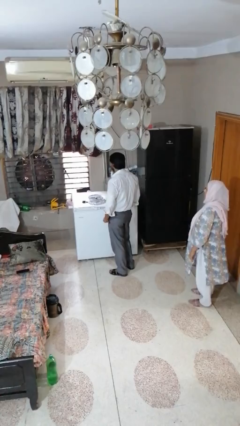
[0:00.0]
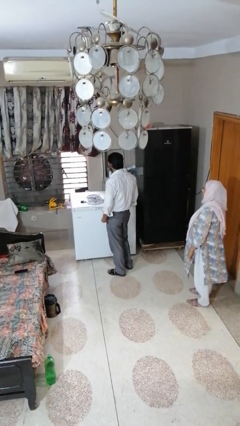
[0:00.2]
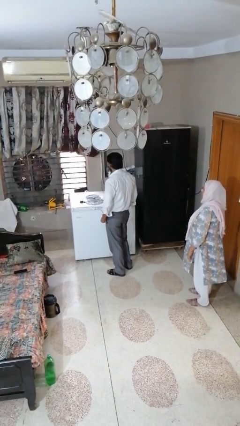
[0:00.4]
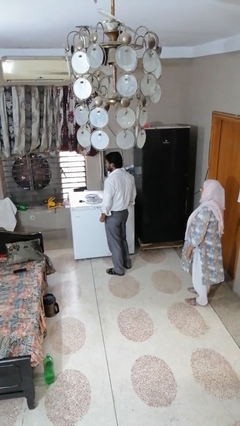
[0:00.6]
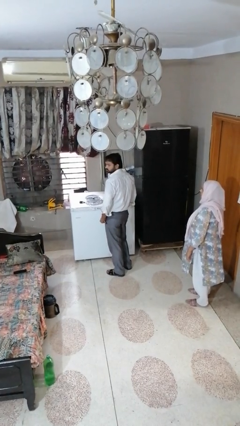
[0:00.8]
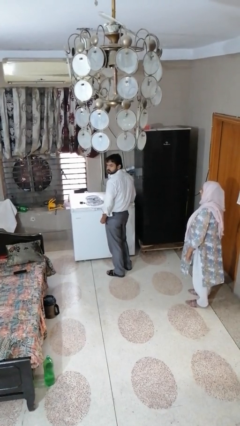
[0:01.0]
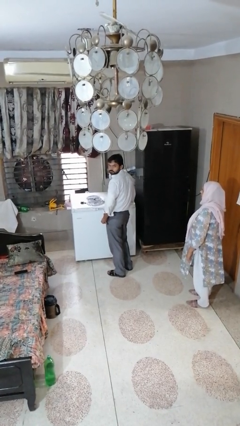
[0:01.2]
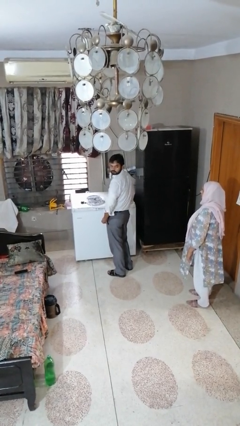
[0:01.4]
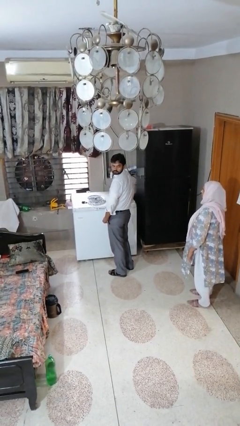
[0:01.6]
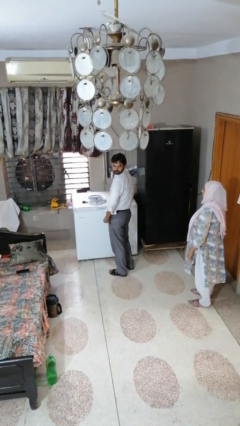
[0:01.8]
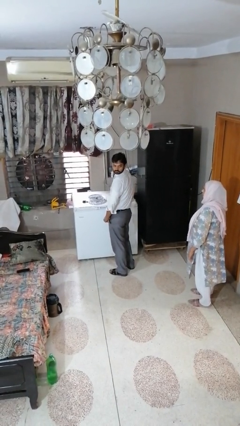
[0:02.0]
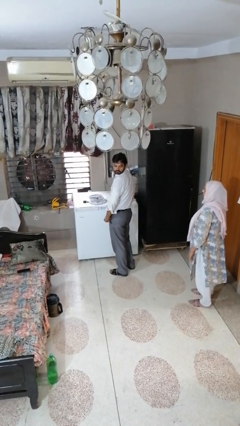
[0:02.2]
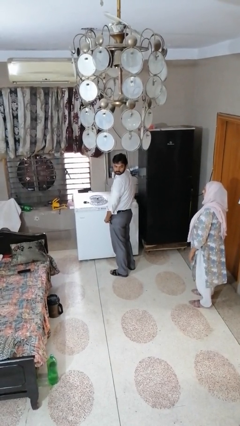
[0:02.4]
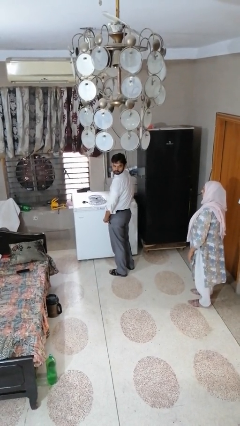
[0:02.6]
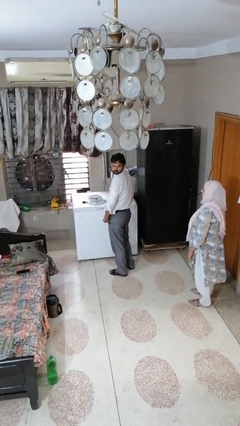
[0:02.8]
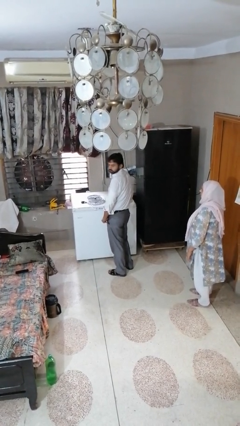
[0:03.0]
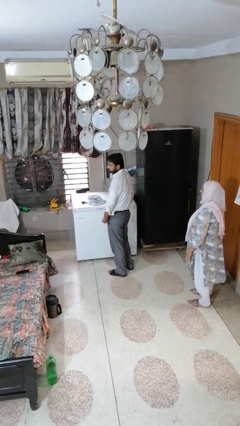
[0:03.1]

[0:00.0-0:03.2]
person looks over shoulder

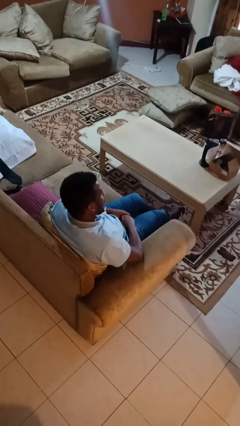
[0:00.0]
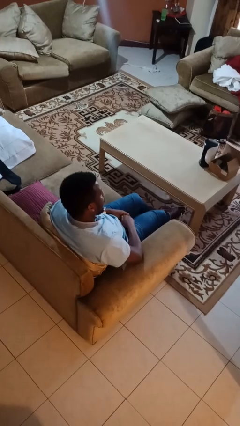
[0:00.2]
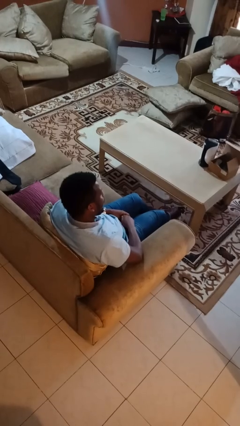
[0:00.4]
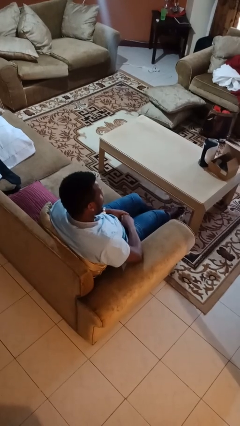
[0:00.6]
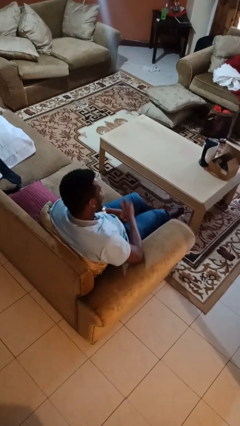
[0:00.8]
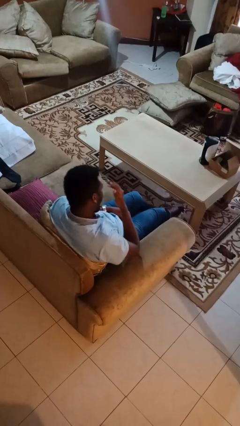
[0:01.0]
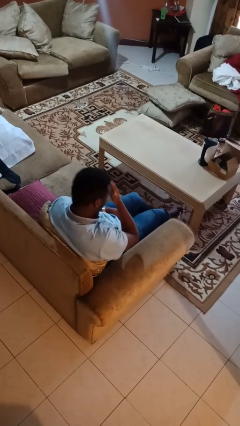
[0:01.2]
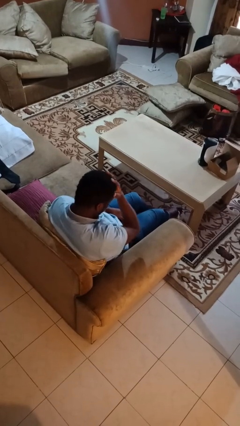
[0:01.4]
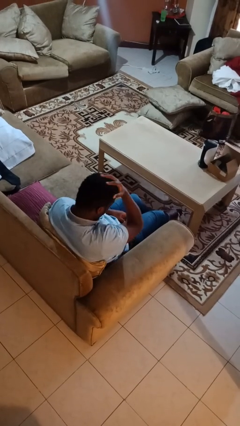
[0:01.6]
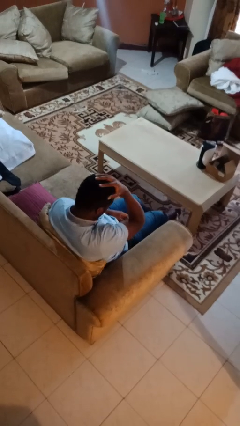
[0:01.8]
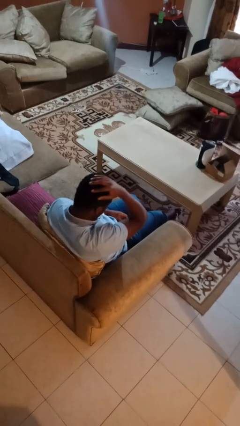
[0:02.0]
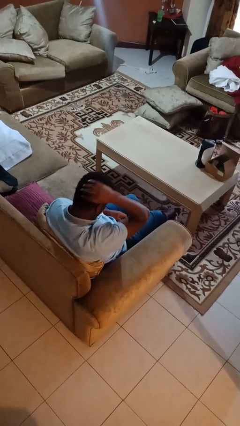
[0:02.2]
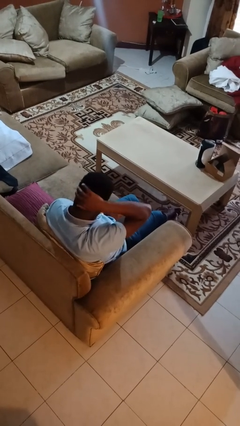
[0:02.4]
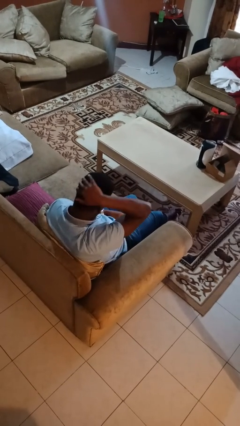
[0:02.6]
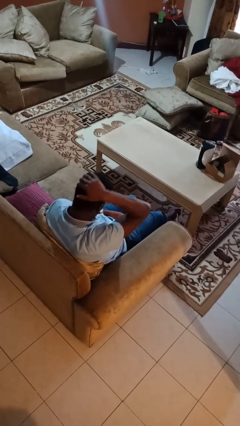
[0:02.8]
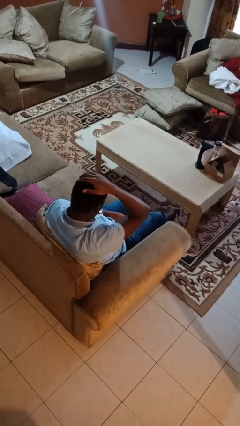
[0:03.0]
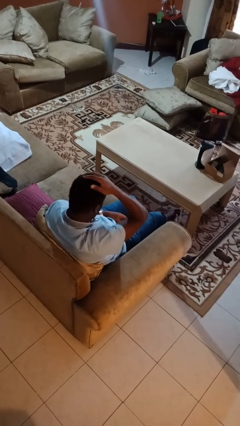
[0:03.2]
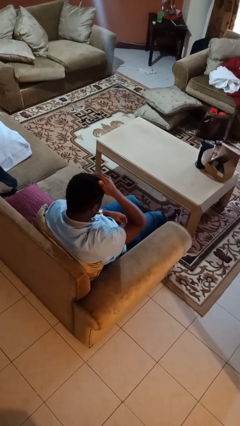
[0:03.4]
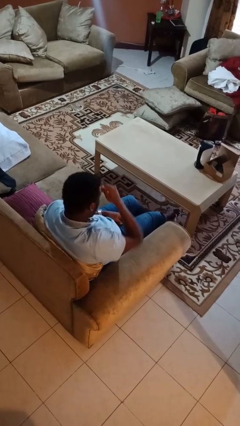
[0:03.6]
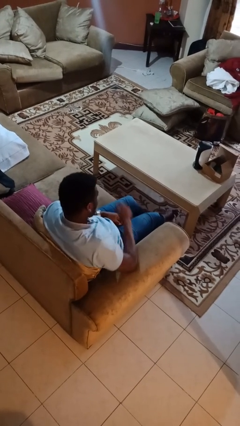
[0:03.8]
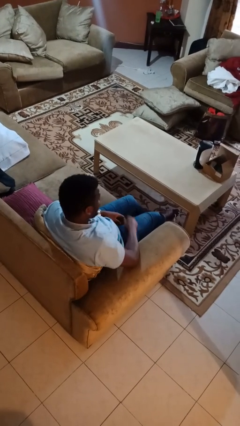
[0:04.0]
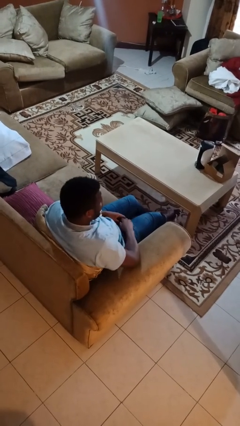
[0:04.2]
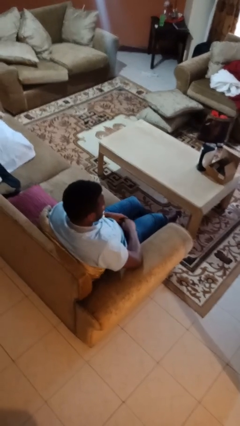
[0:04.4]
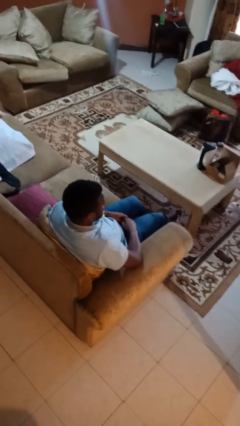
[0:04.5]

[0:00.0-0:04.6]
person strokes hair

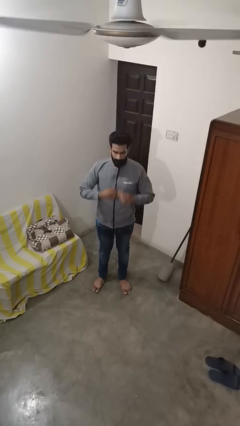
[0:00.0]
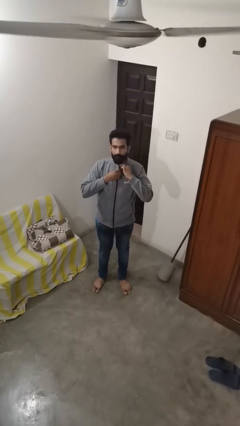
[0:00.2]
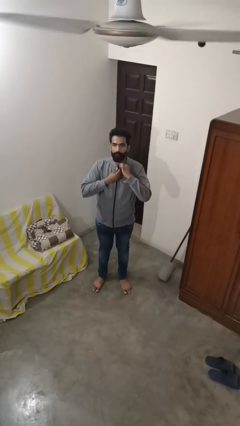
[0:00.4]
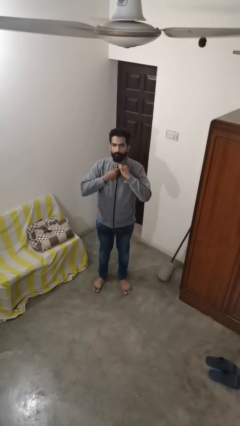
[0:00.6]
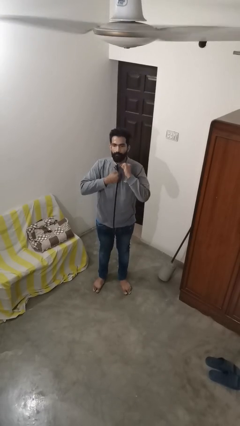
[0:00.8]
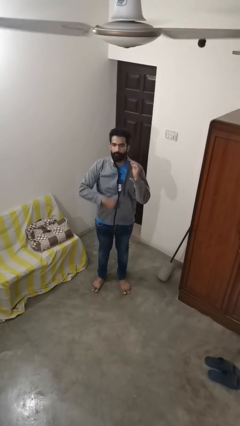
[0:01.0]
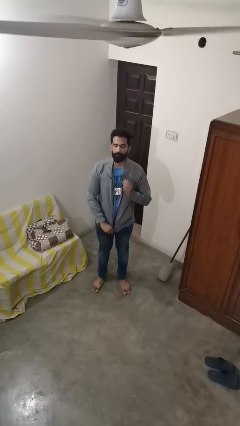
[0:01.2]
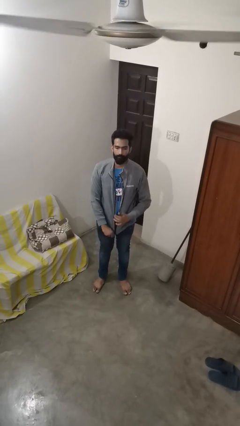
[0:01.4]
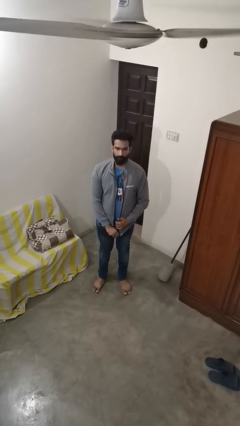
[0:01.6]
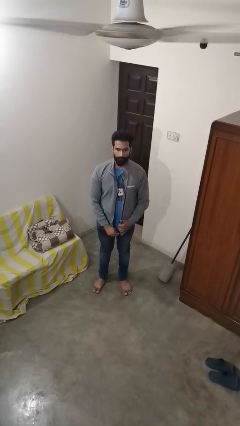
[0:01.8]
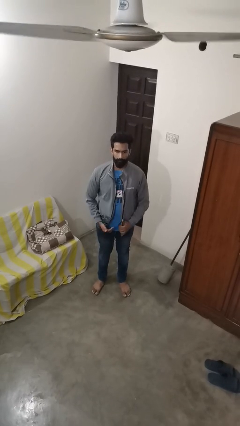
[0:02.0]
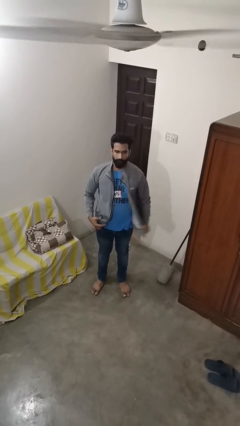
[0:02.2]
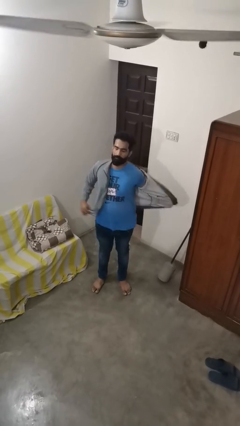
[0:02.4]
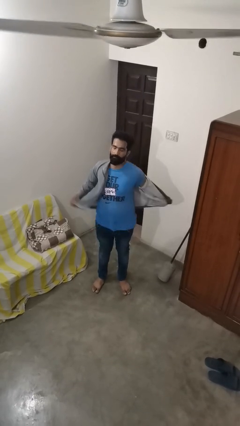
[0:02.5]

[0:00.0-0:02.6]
person unzips jacket

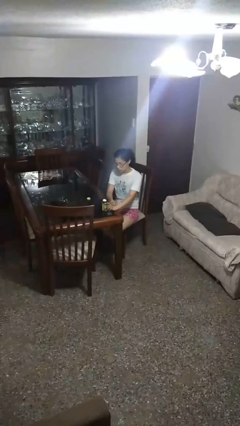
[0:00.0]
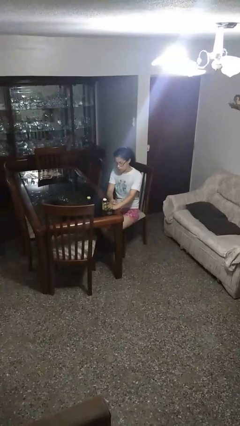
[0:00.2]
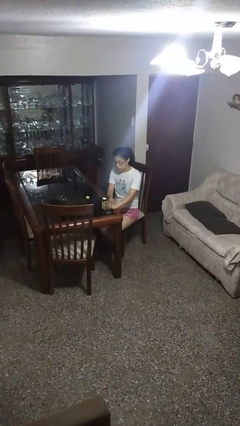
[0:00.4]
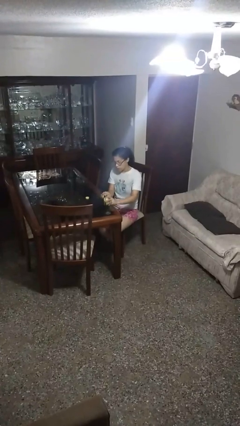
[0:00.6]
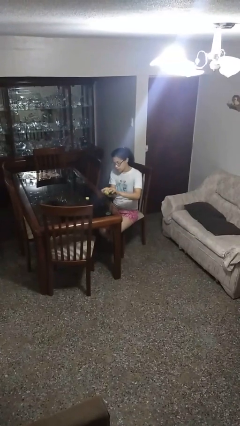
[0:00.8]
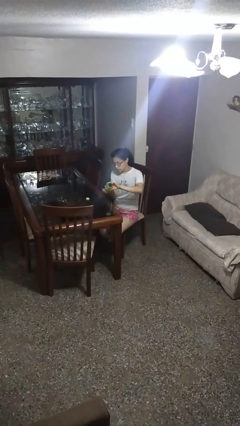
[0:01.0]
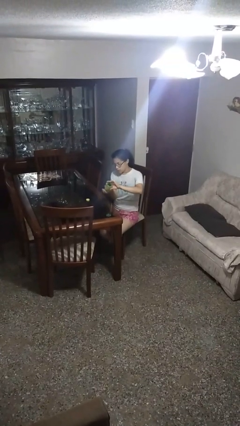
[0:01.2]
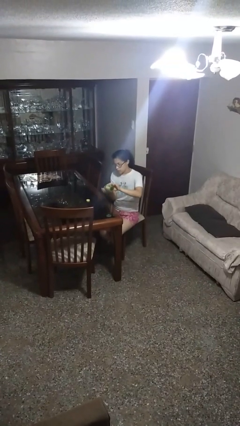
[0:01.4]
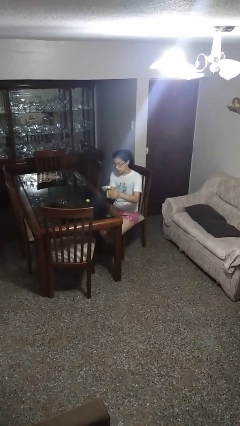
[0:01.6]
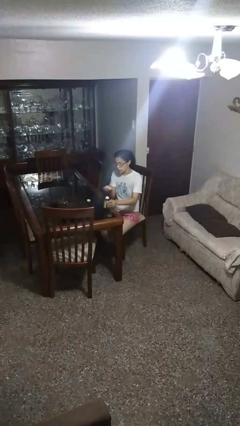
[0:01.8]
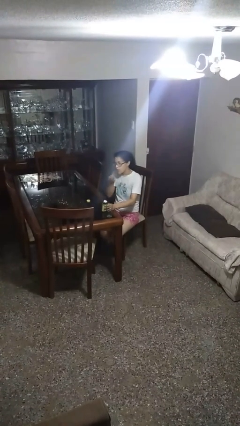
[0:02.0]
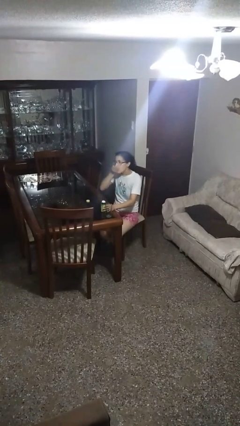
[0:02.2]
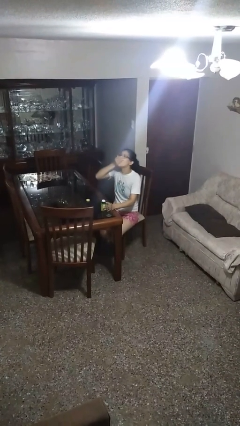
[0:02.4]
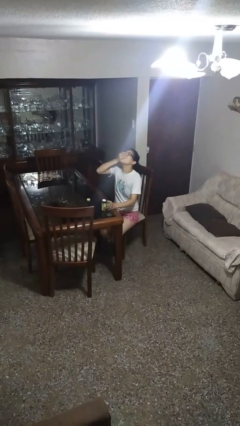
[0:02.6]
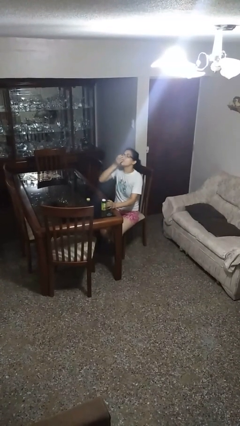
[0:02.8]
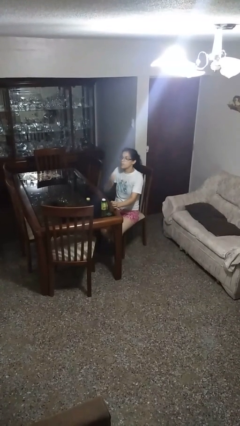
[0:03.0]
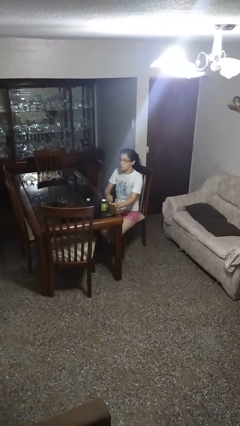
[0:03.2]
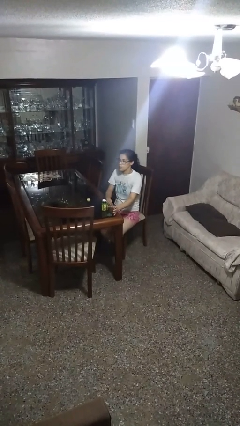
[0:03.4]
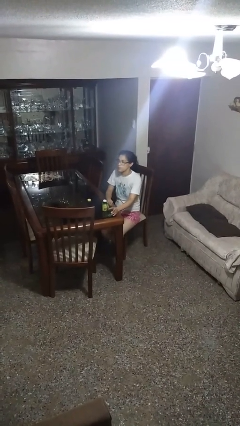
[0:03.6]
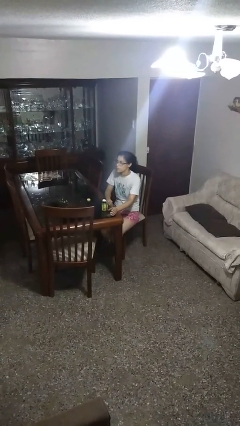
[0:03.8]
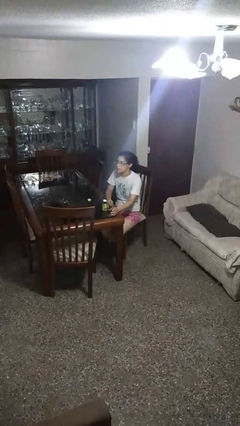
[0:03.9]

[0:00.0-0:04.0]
person takes medicine pills

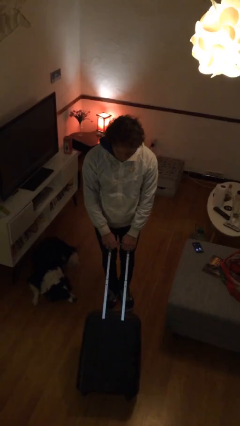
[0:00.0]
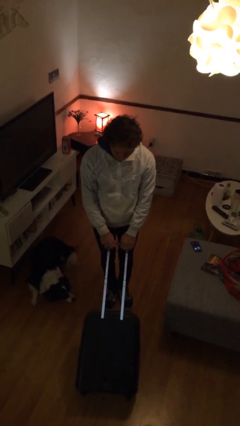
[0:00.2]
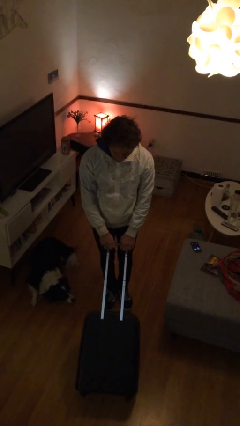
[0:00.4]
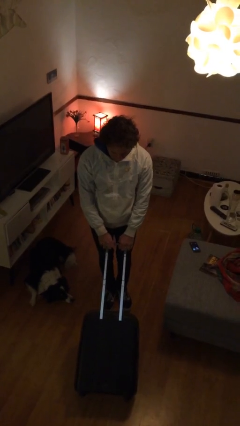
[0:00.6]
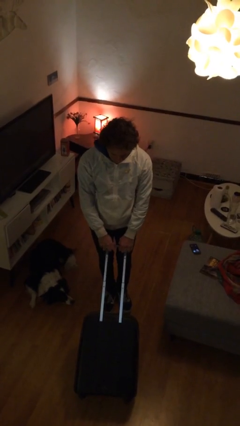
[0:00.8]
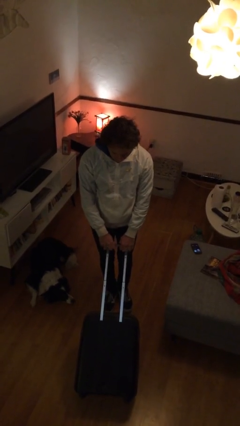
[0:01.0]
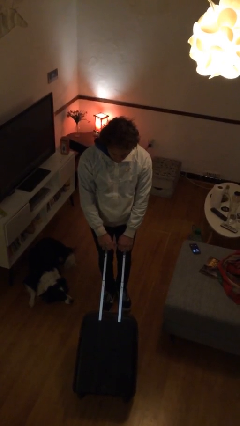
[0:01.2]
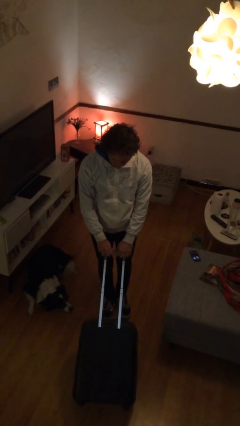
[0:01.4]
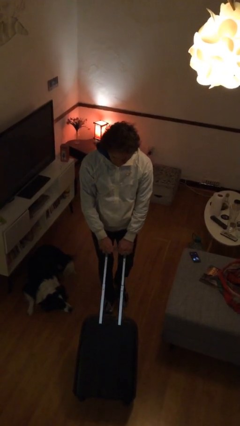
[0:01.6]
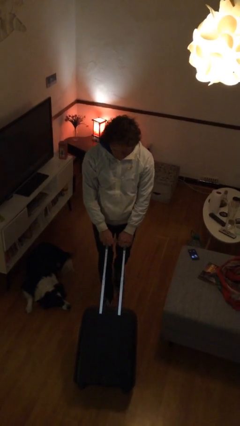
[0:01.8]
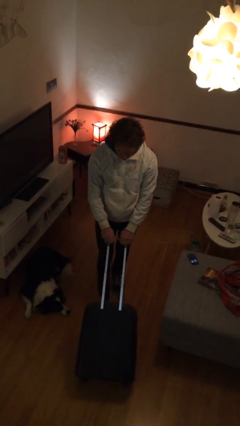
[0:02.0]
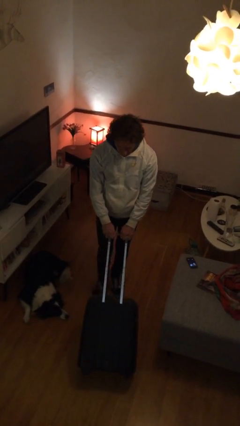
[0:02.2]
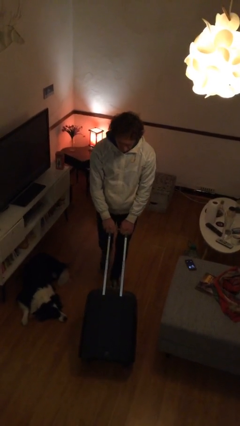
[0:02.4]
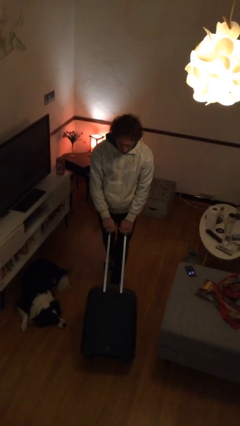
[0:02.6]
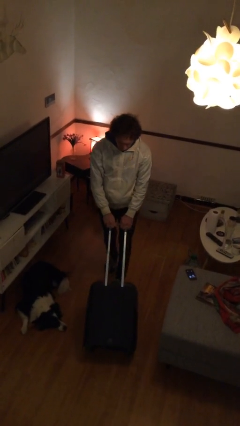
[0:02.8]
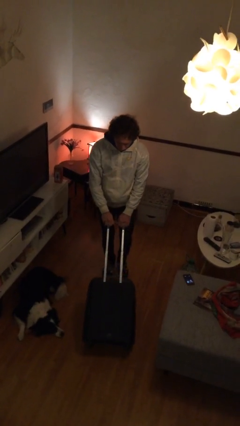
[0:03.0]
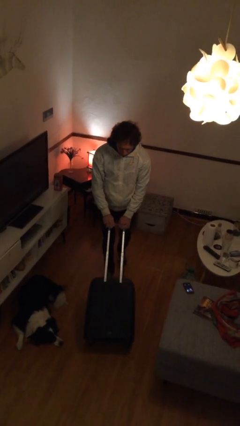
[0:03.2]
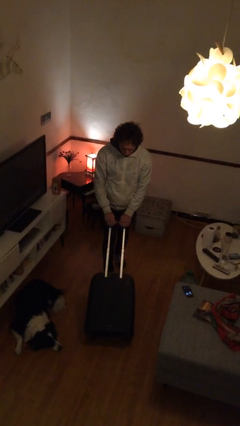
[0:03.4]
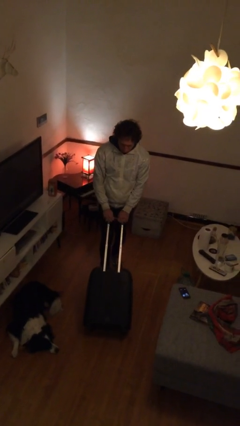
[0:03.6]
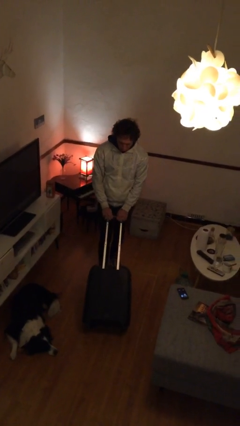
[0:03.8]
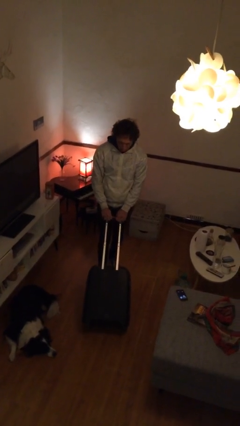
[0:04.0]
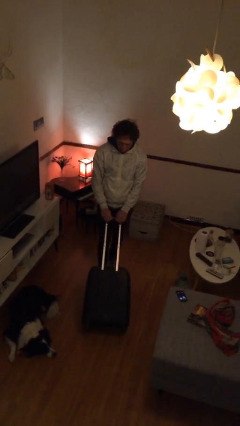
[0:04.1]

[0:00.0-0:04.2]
person pulls wheeled cart
